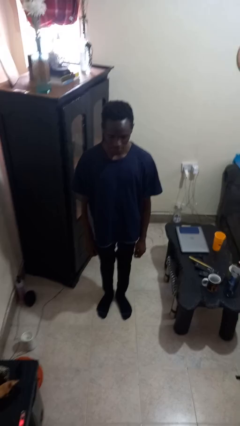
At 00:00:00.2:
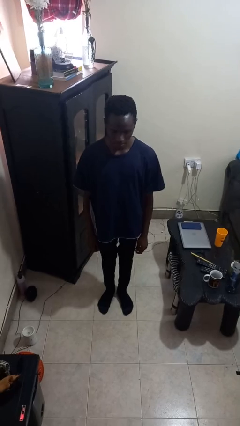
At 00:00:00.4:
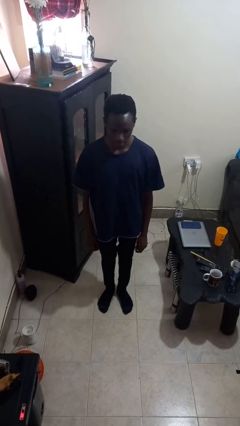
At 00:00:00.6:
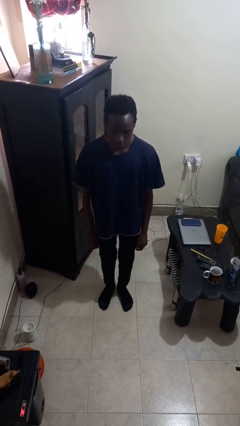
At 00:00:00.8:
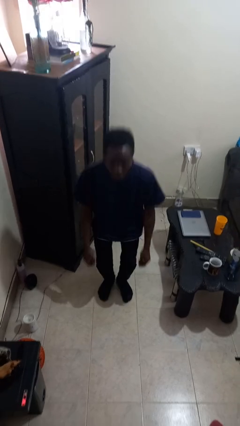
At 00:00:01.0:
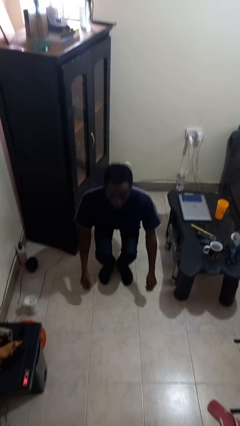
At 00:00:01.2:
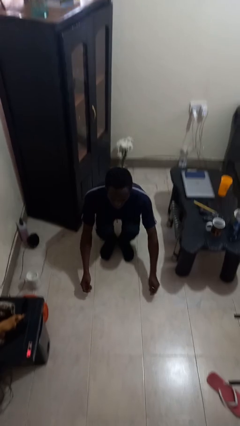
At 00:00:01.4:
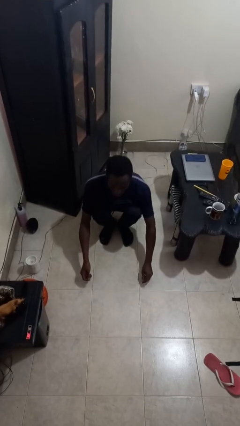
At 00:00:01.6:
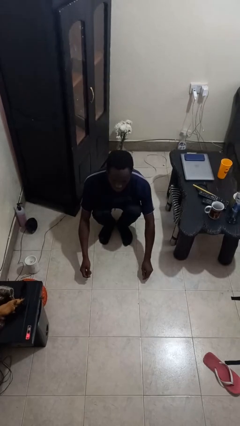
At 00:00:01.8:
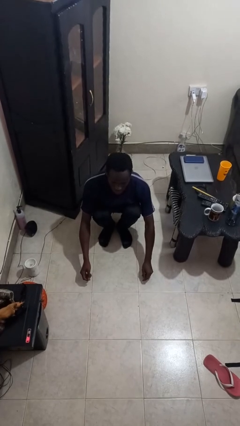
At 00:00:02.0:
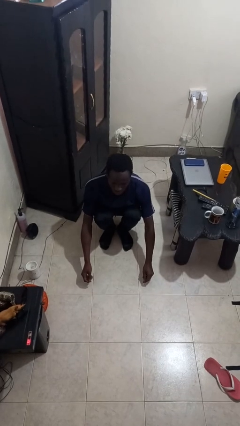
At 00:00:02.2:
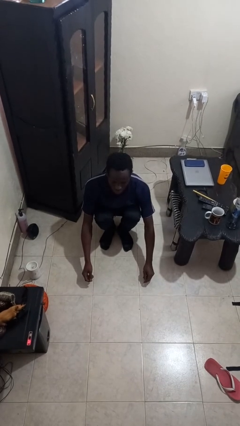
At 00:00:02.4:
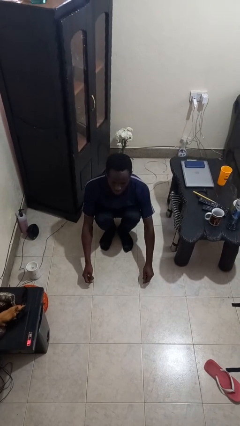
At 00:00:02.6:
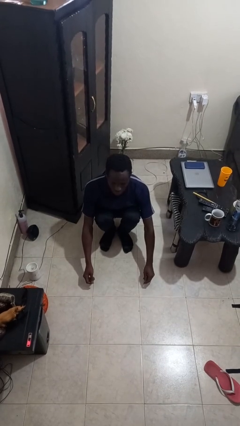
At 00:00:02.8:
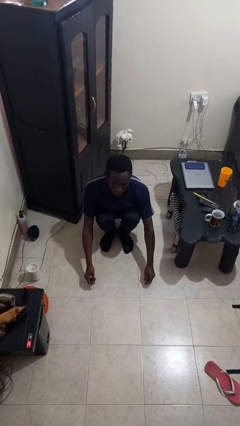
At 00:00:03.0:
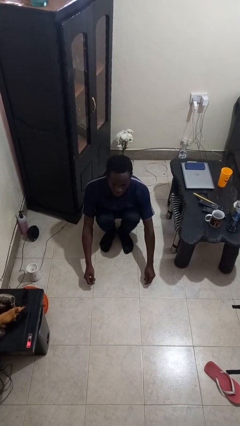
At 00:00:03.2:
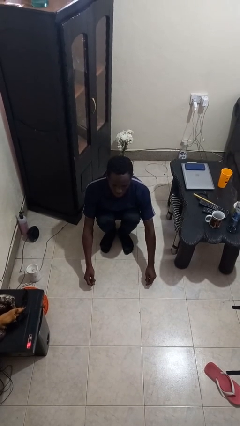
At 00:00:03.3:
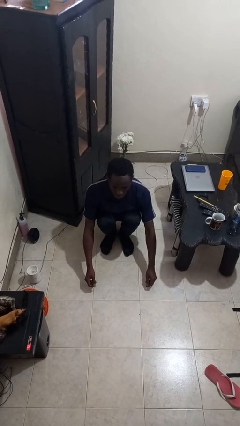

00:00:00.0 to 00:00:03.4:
person squats

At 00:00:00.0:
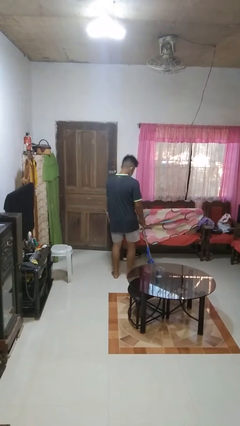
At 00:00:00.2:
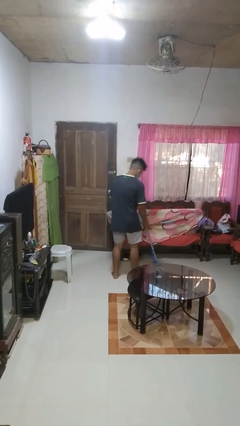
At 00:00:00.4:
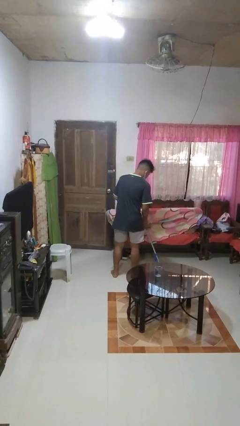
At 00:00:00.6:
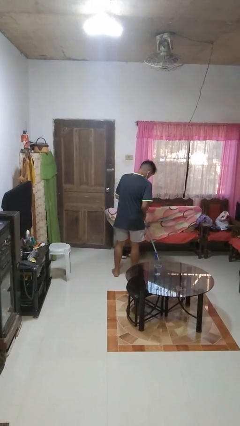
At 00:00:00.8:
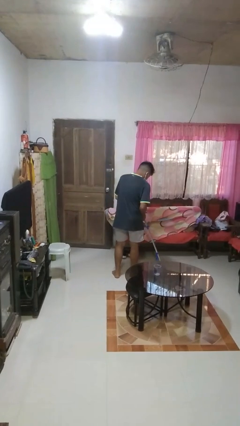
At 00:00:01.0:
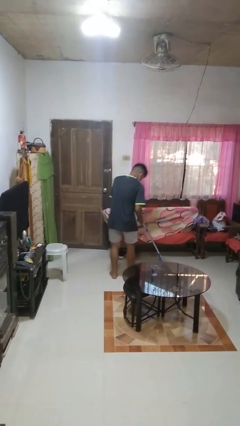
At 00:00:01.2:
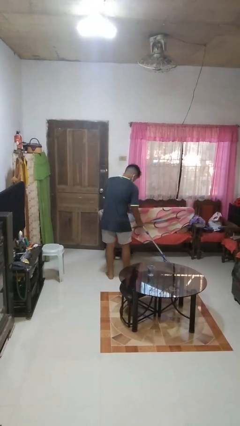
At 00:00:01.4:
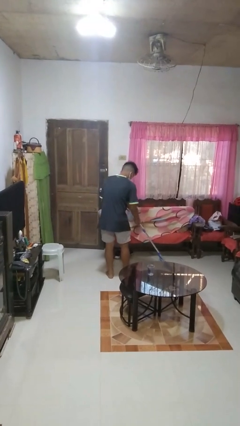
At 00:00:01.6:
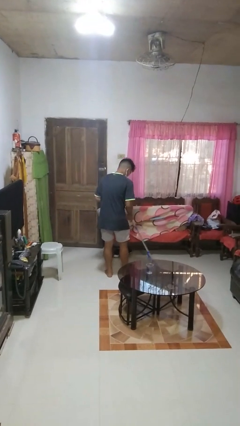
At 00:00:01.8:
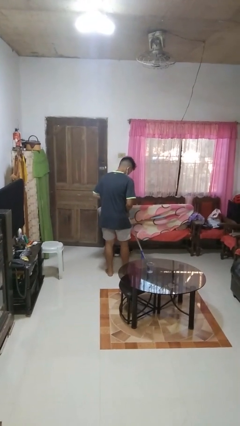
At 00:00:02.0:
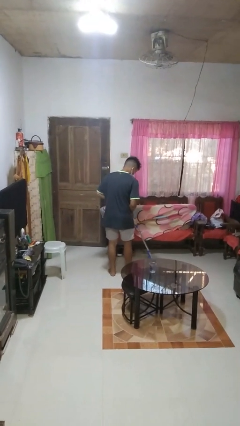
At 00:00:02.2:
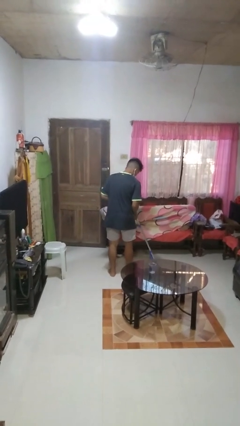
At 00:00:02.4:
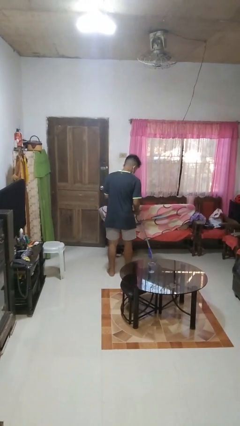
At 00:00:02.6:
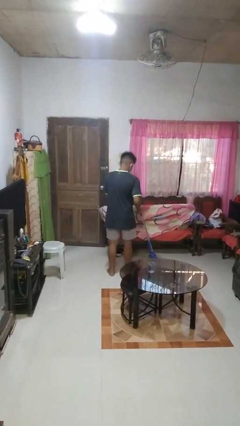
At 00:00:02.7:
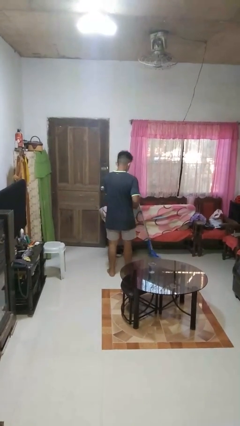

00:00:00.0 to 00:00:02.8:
person mops

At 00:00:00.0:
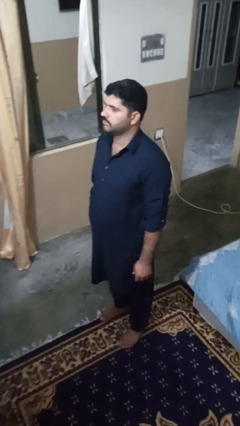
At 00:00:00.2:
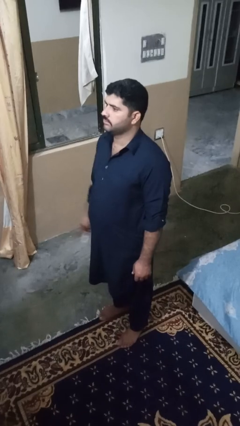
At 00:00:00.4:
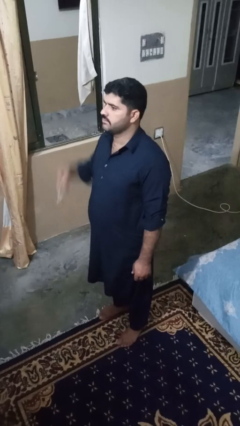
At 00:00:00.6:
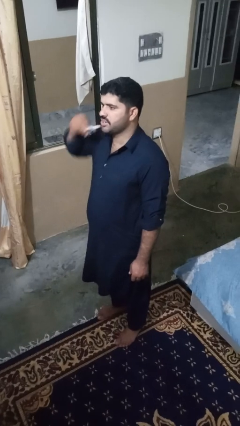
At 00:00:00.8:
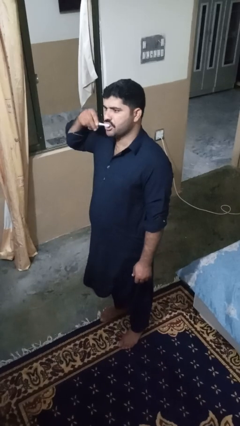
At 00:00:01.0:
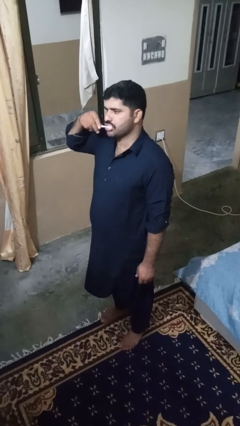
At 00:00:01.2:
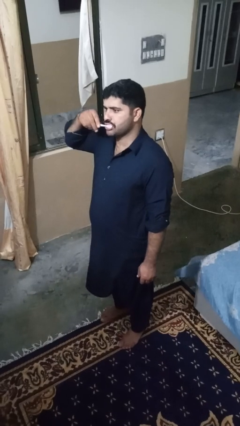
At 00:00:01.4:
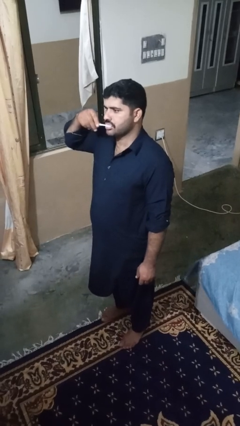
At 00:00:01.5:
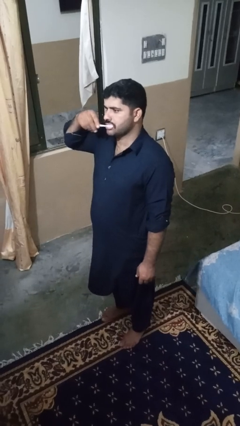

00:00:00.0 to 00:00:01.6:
person brushes teeth

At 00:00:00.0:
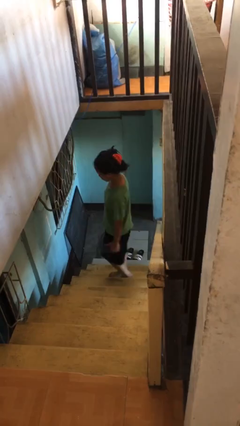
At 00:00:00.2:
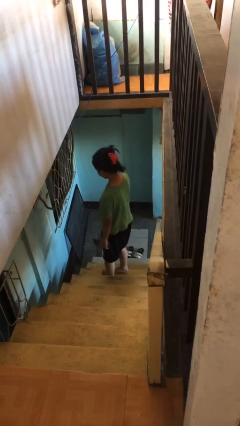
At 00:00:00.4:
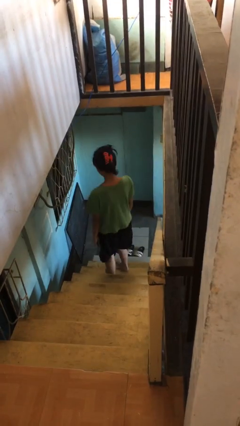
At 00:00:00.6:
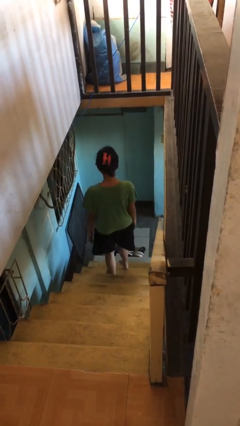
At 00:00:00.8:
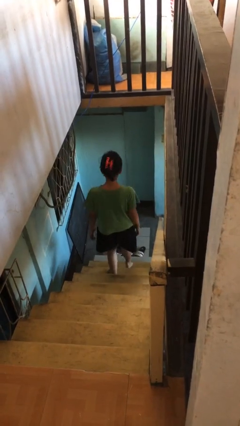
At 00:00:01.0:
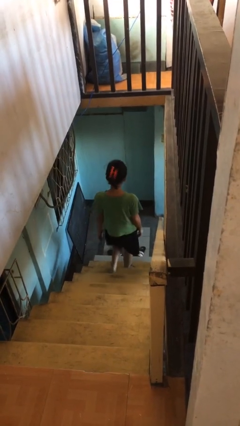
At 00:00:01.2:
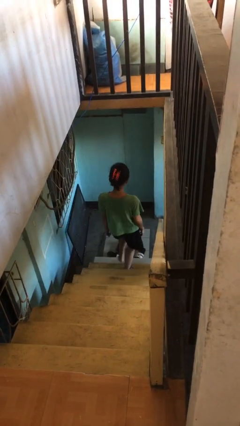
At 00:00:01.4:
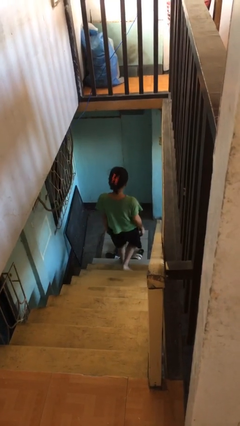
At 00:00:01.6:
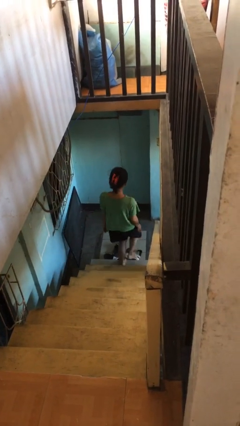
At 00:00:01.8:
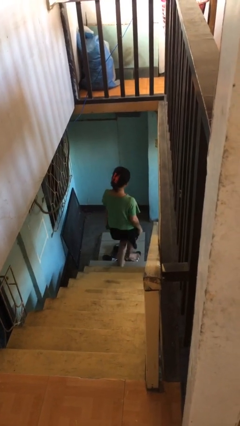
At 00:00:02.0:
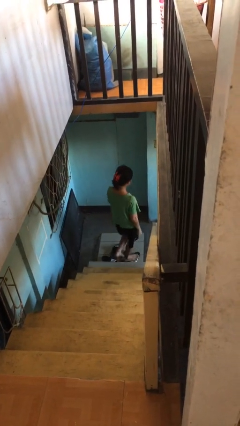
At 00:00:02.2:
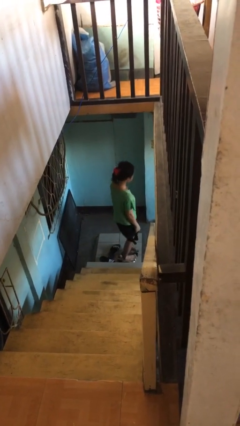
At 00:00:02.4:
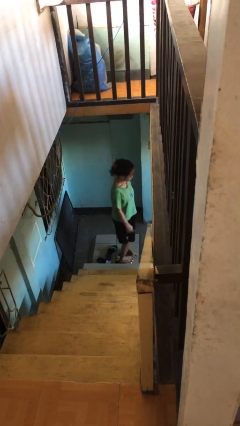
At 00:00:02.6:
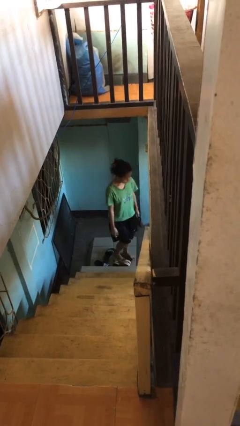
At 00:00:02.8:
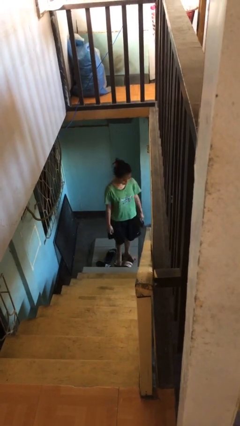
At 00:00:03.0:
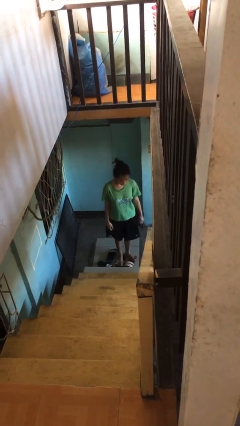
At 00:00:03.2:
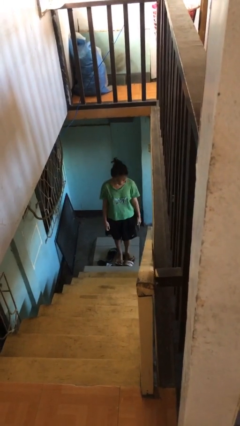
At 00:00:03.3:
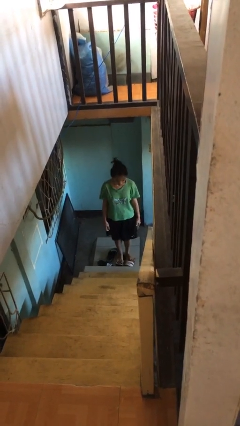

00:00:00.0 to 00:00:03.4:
person climbs down stairs

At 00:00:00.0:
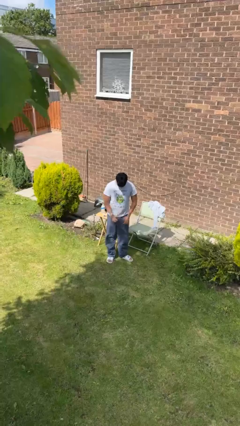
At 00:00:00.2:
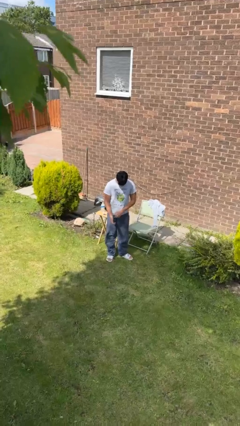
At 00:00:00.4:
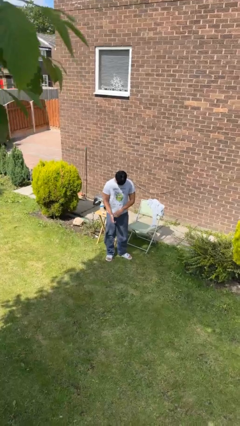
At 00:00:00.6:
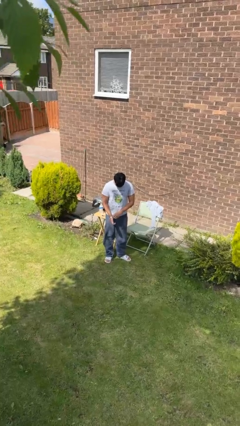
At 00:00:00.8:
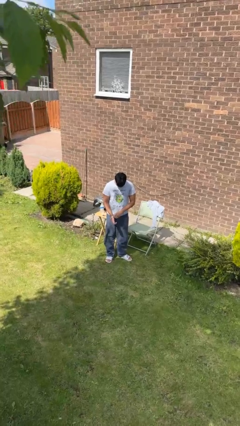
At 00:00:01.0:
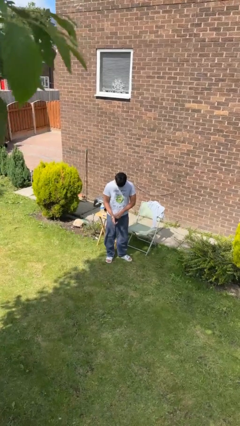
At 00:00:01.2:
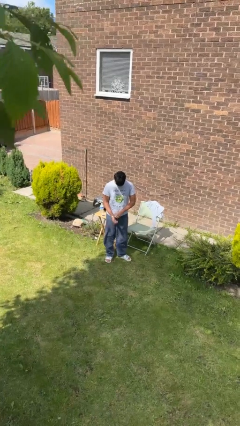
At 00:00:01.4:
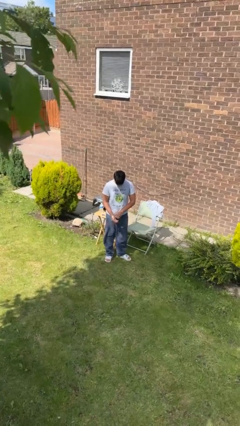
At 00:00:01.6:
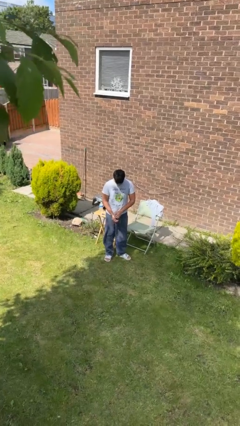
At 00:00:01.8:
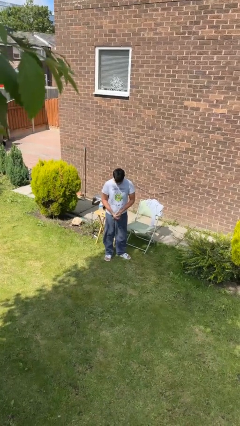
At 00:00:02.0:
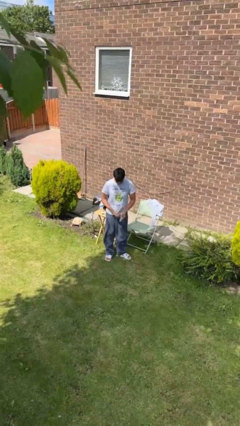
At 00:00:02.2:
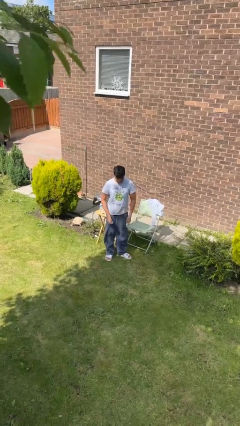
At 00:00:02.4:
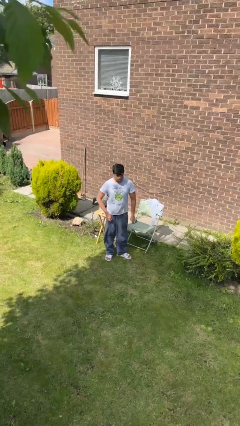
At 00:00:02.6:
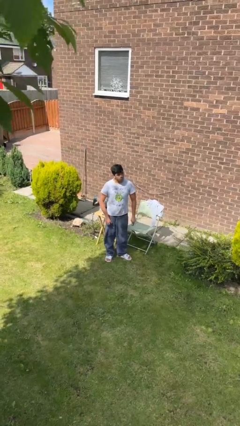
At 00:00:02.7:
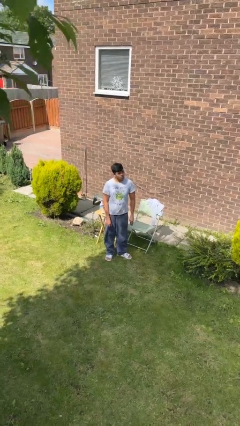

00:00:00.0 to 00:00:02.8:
person takes off wristwatch

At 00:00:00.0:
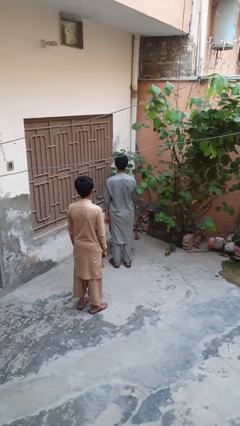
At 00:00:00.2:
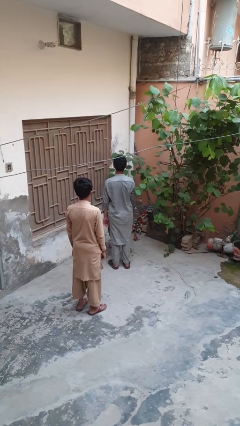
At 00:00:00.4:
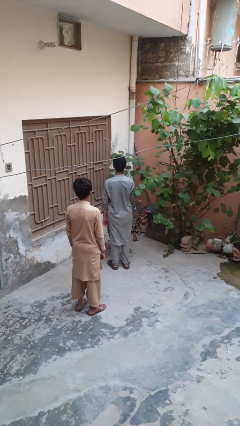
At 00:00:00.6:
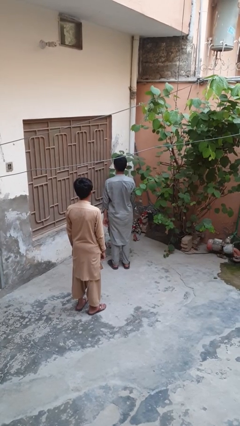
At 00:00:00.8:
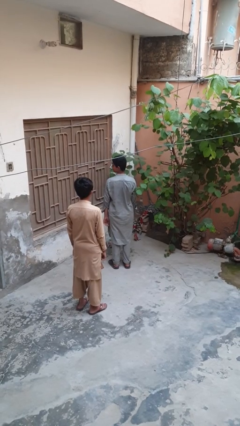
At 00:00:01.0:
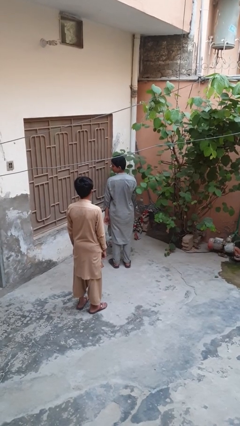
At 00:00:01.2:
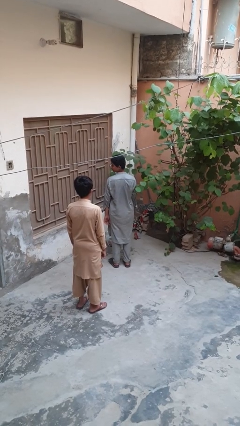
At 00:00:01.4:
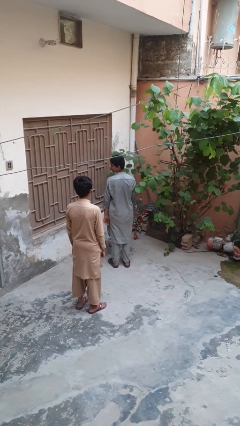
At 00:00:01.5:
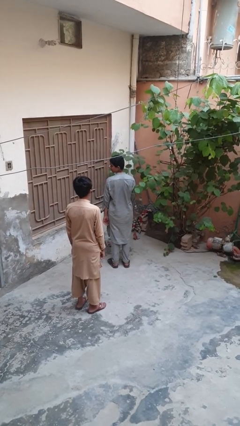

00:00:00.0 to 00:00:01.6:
person looks over shoulder

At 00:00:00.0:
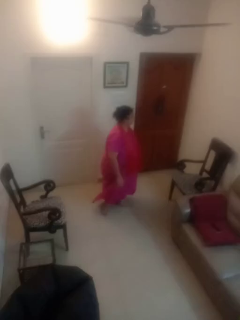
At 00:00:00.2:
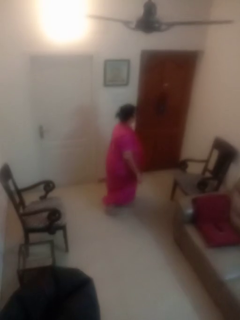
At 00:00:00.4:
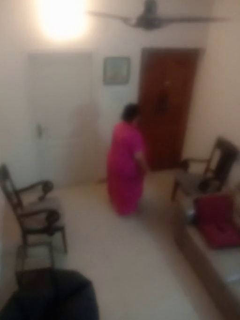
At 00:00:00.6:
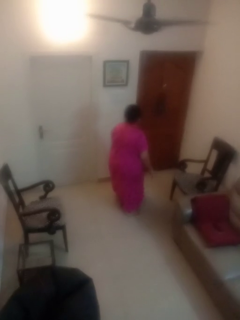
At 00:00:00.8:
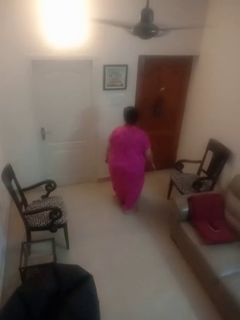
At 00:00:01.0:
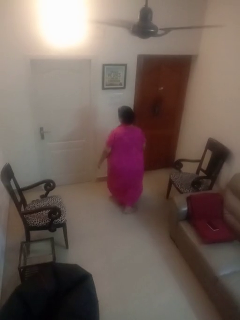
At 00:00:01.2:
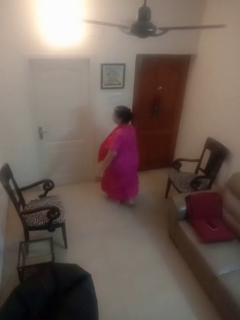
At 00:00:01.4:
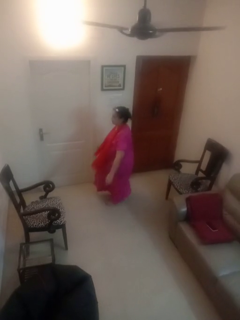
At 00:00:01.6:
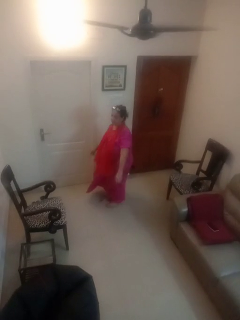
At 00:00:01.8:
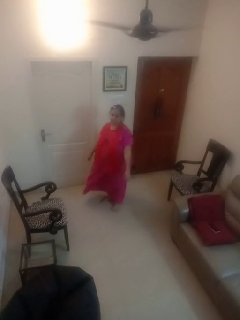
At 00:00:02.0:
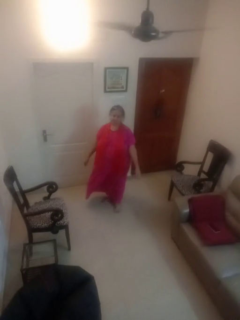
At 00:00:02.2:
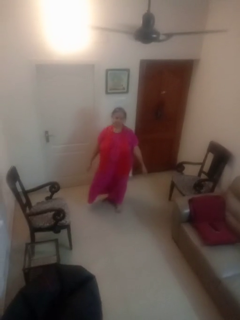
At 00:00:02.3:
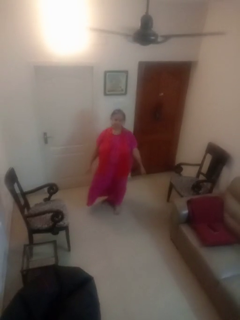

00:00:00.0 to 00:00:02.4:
person twirls
